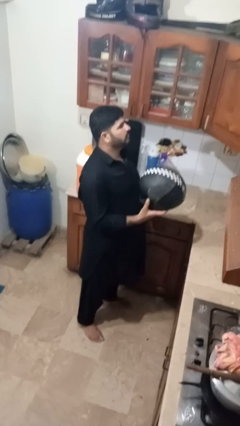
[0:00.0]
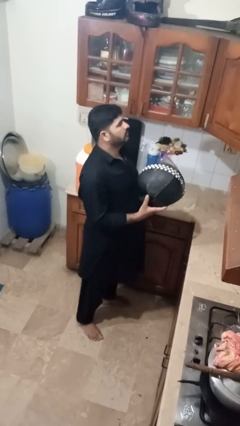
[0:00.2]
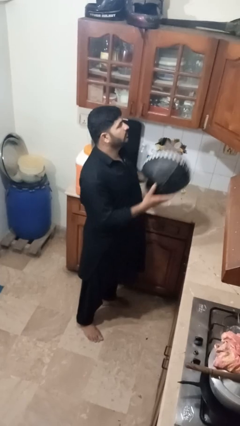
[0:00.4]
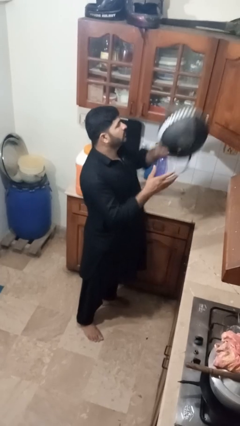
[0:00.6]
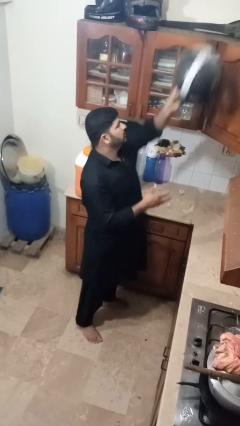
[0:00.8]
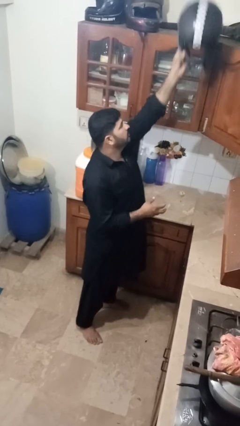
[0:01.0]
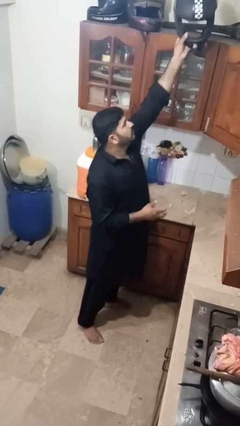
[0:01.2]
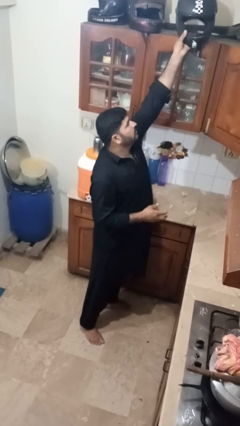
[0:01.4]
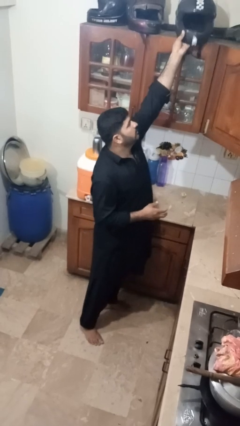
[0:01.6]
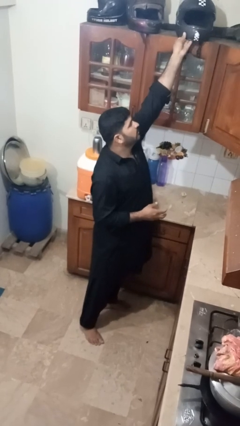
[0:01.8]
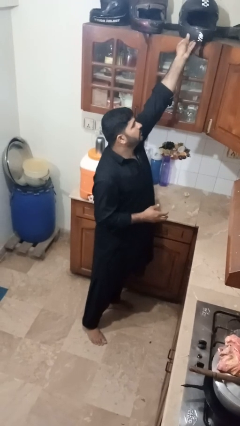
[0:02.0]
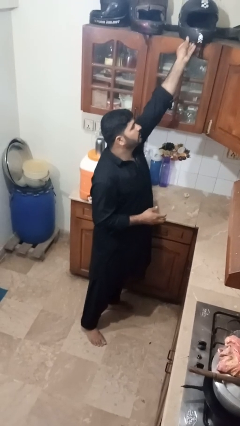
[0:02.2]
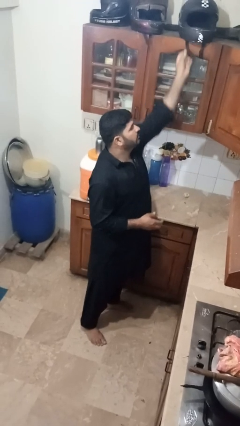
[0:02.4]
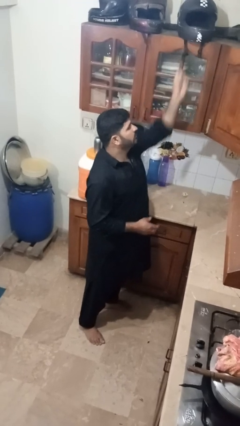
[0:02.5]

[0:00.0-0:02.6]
person puts down object on shelf

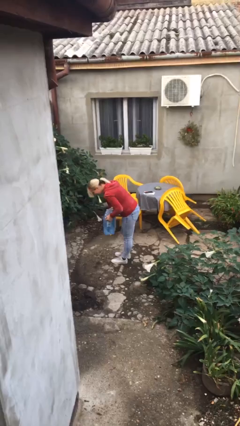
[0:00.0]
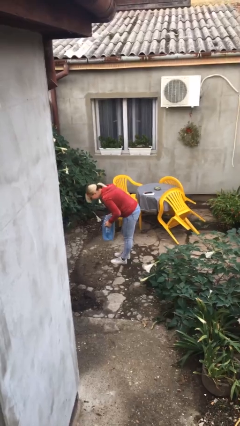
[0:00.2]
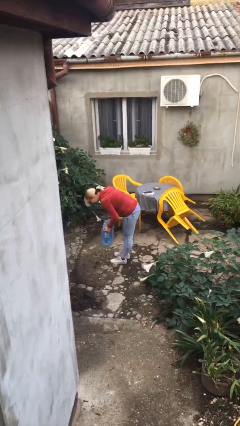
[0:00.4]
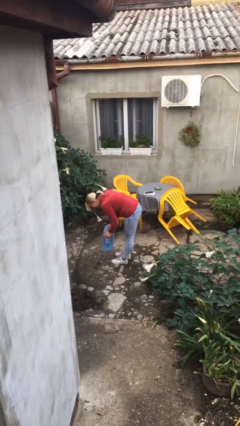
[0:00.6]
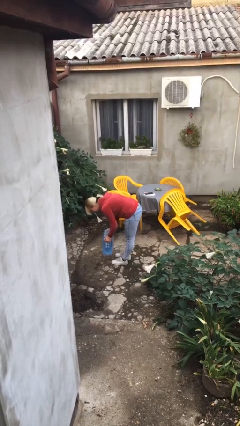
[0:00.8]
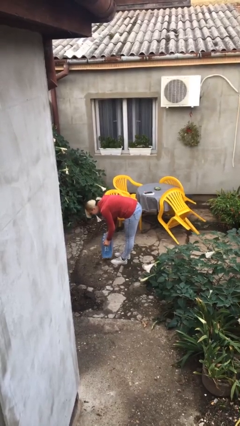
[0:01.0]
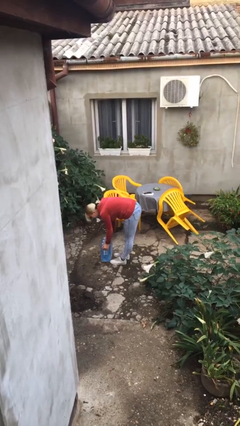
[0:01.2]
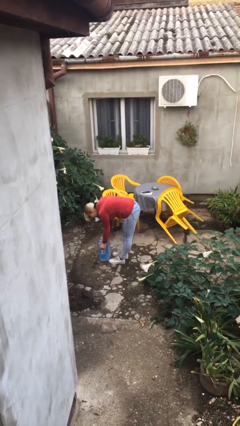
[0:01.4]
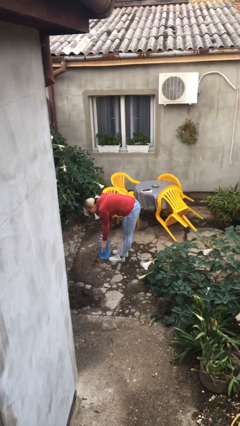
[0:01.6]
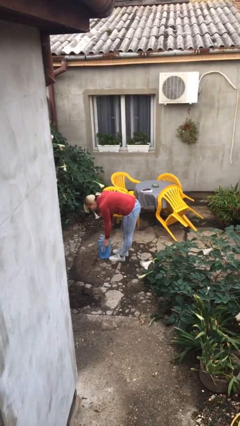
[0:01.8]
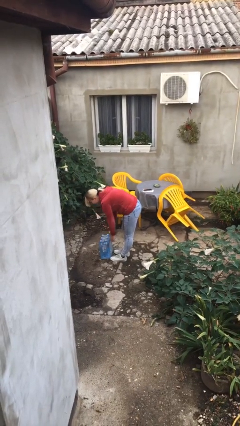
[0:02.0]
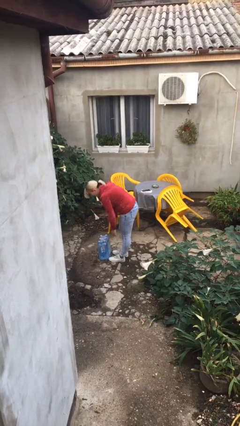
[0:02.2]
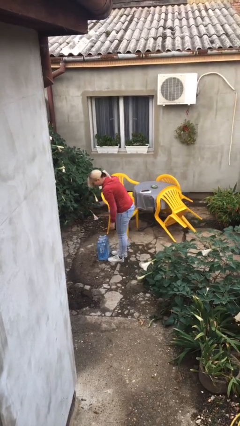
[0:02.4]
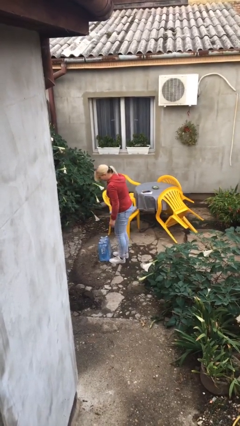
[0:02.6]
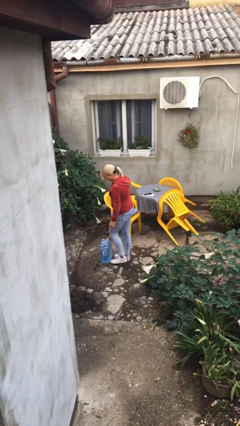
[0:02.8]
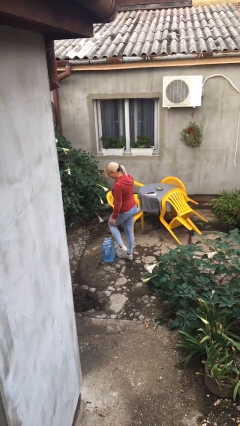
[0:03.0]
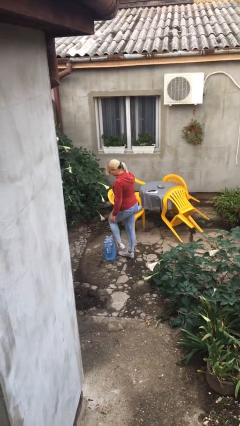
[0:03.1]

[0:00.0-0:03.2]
person puts down object on floor

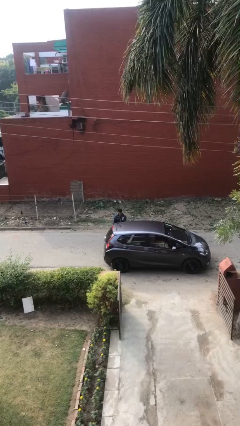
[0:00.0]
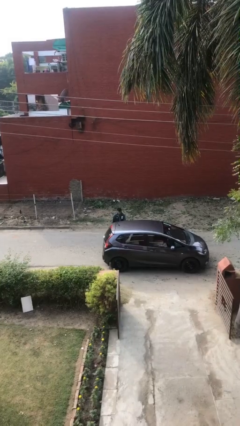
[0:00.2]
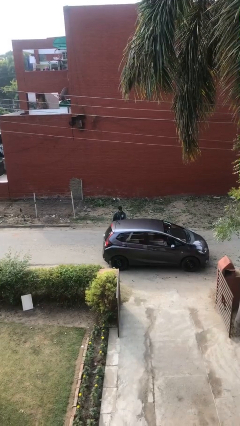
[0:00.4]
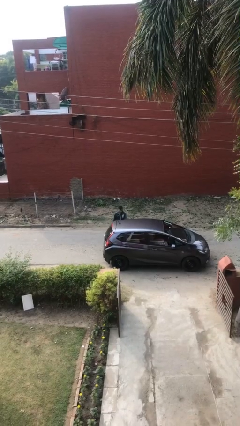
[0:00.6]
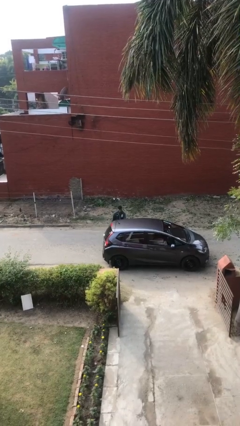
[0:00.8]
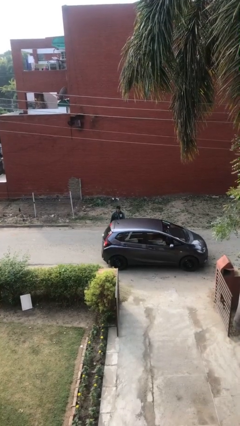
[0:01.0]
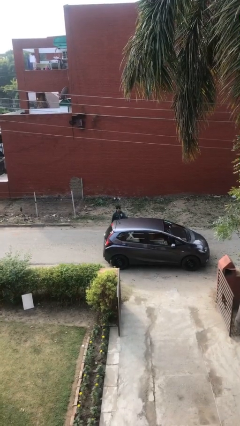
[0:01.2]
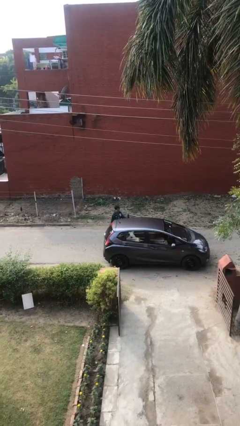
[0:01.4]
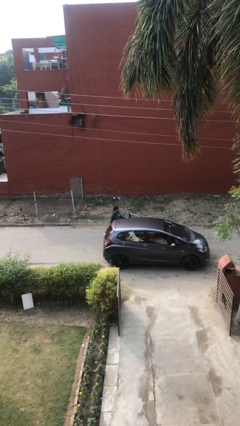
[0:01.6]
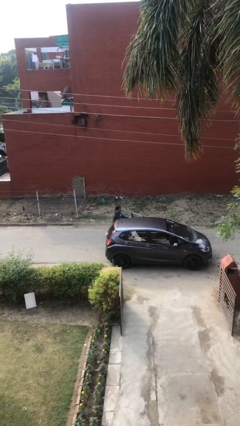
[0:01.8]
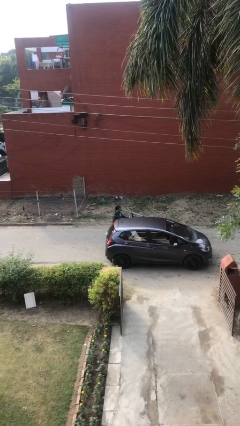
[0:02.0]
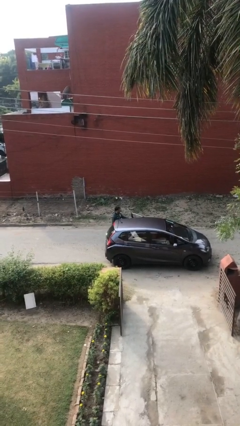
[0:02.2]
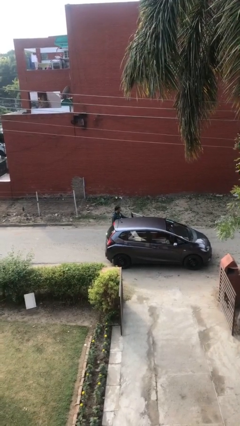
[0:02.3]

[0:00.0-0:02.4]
person opens car door

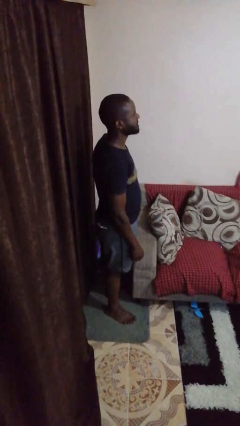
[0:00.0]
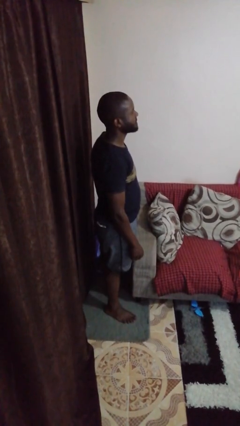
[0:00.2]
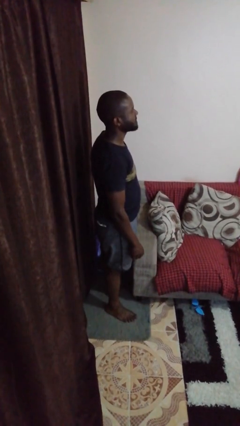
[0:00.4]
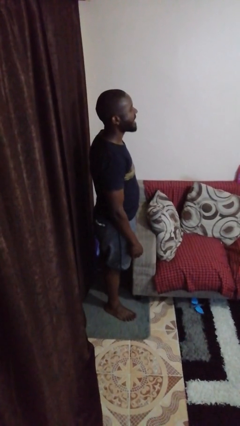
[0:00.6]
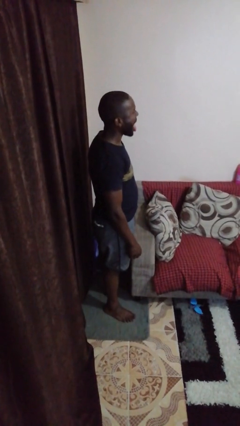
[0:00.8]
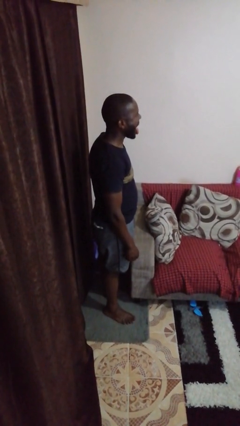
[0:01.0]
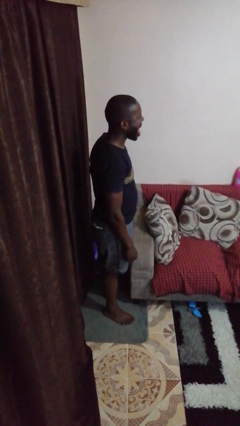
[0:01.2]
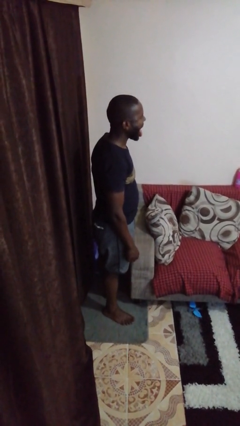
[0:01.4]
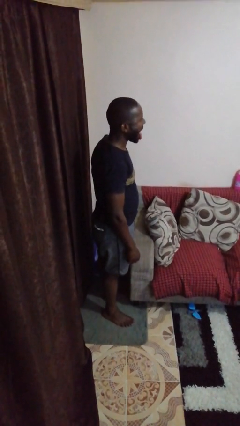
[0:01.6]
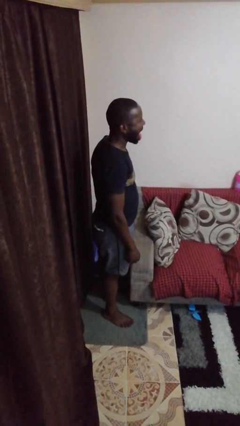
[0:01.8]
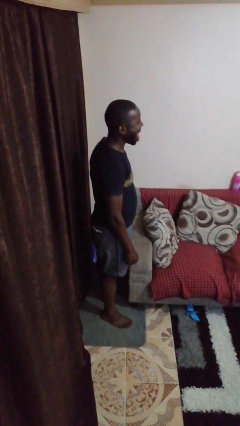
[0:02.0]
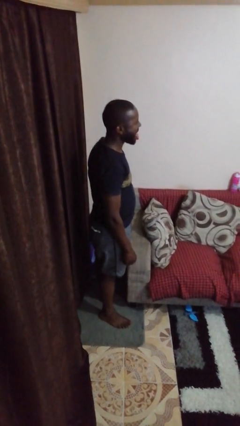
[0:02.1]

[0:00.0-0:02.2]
person sticks out tongue

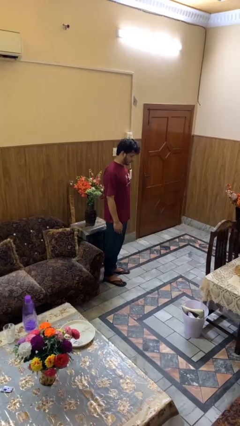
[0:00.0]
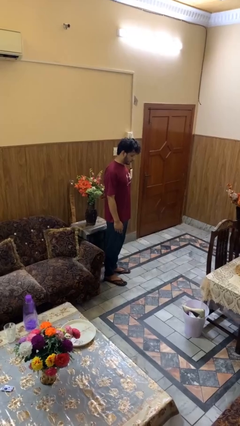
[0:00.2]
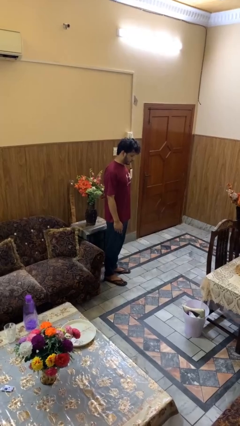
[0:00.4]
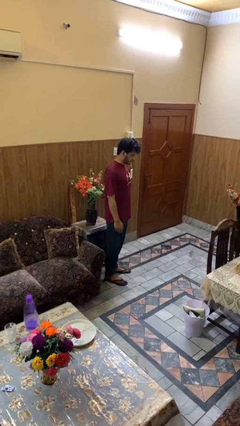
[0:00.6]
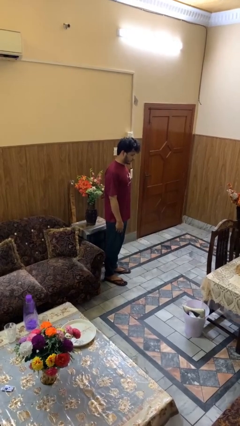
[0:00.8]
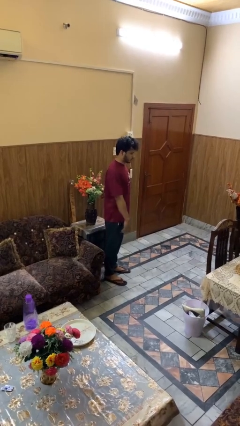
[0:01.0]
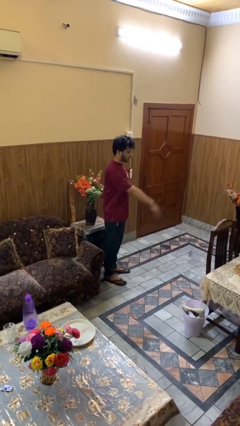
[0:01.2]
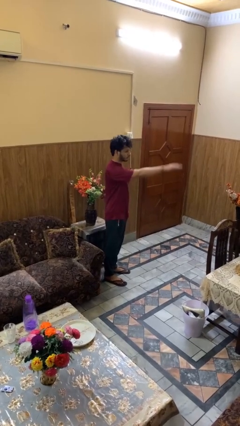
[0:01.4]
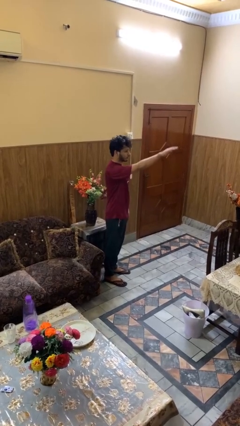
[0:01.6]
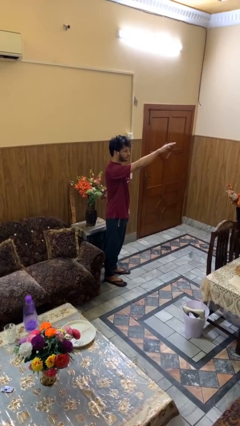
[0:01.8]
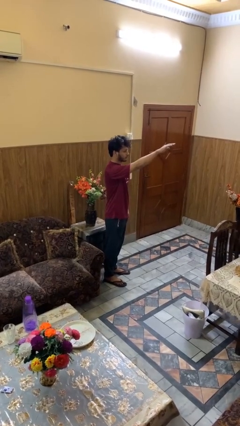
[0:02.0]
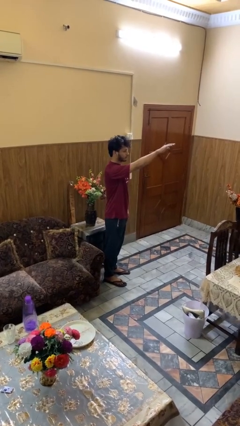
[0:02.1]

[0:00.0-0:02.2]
person gestures swipe up

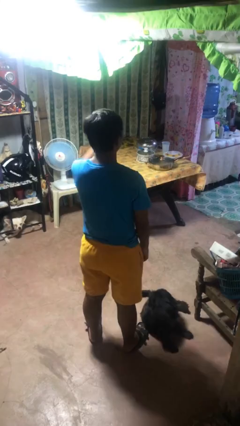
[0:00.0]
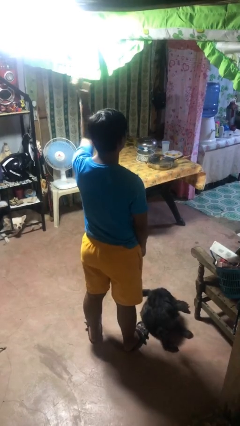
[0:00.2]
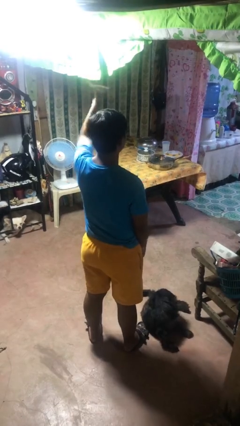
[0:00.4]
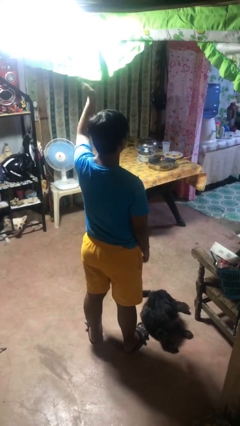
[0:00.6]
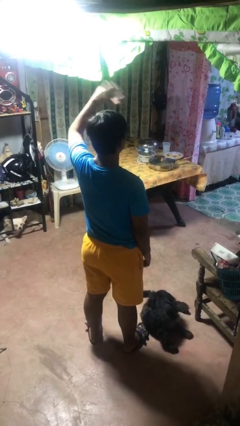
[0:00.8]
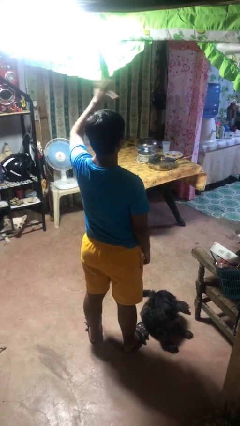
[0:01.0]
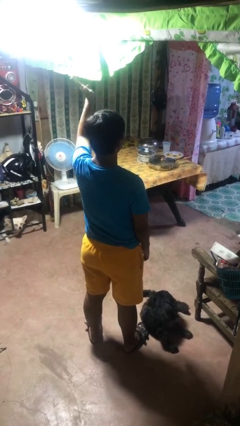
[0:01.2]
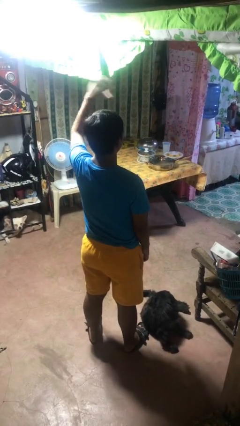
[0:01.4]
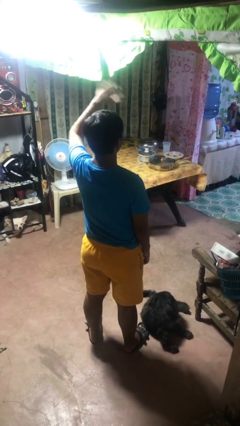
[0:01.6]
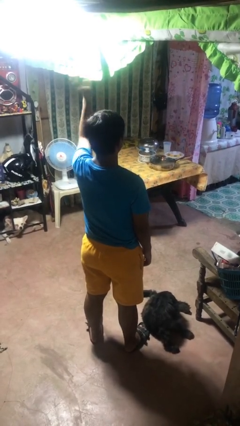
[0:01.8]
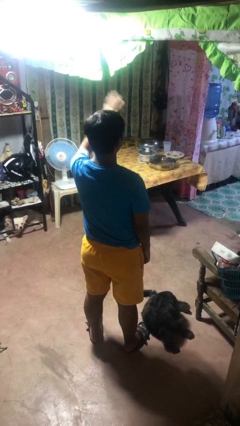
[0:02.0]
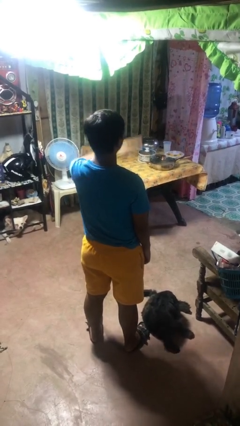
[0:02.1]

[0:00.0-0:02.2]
person waves at person

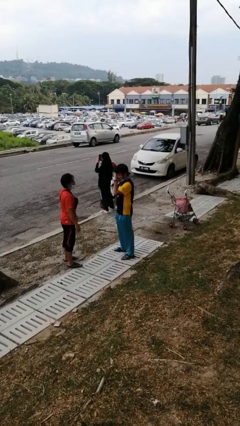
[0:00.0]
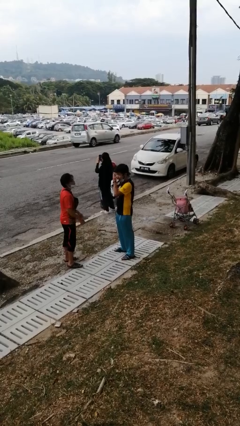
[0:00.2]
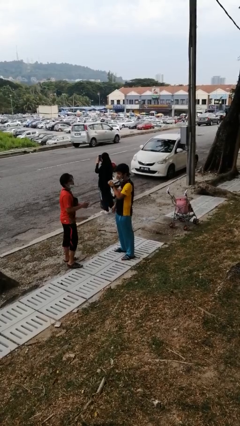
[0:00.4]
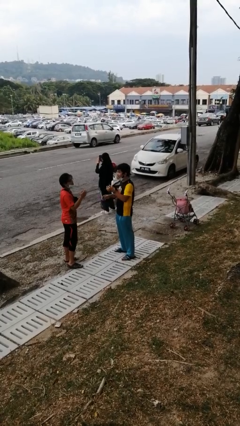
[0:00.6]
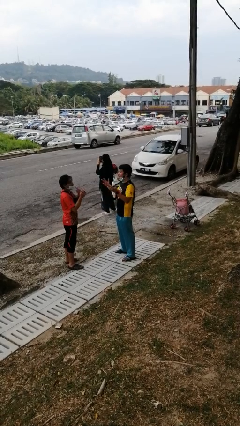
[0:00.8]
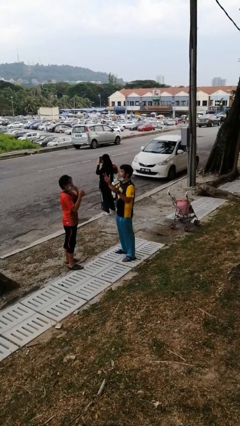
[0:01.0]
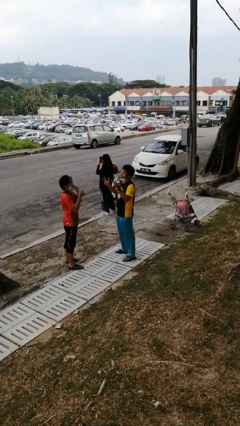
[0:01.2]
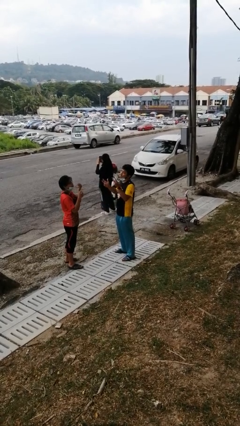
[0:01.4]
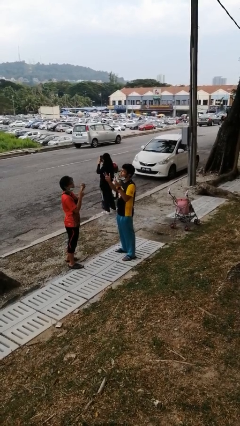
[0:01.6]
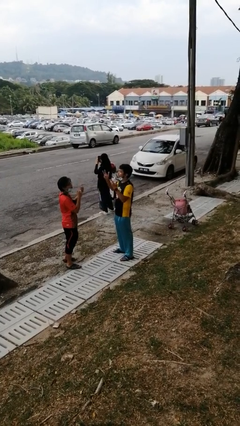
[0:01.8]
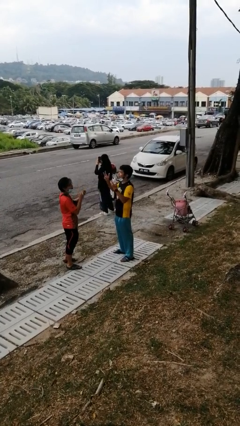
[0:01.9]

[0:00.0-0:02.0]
person talks to person
